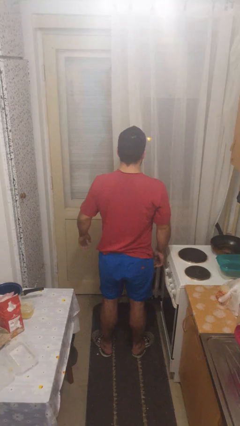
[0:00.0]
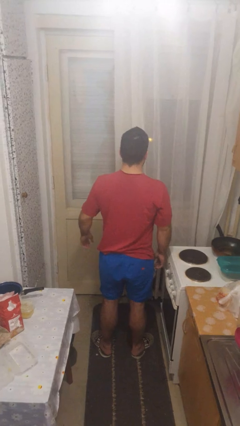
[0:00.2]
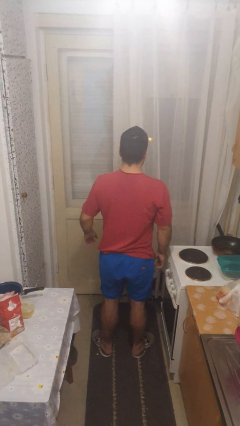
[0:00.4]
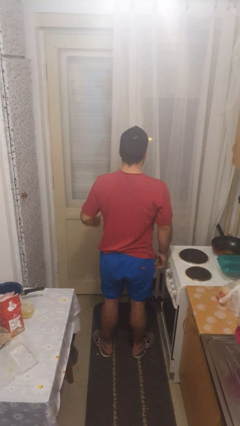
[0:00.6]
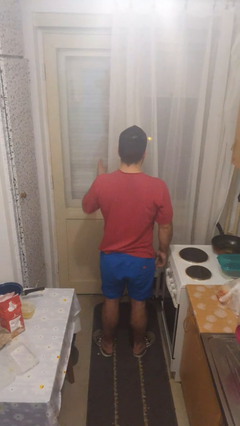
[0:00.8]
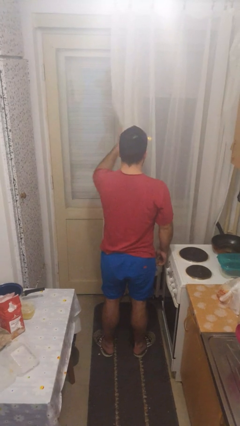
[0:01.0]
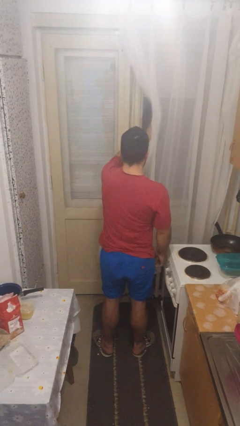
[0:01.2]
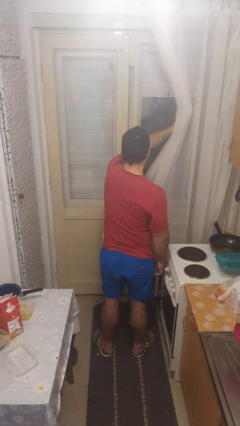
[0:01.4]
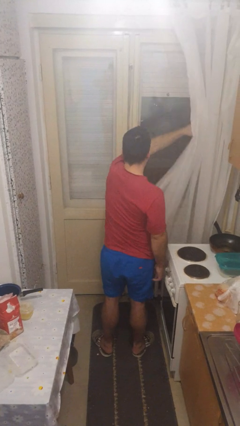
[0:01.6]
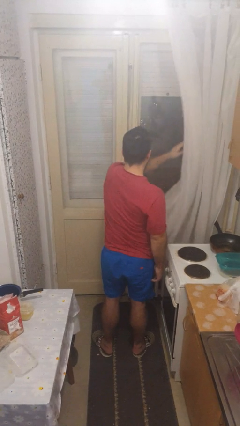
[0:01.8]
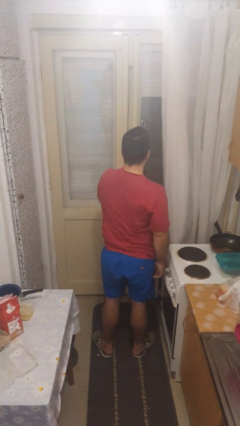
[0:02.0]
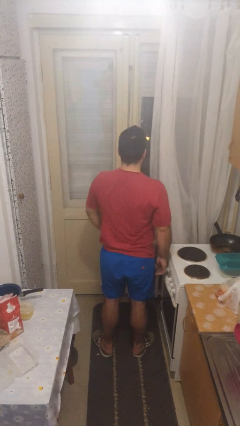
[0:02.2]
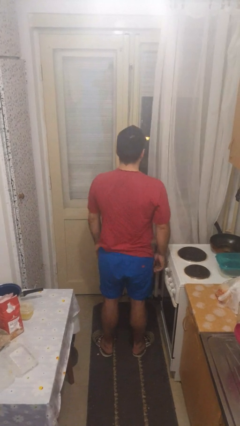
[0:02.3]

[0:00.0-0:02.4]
person opens curtains

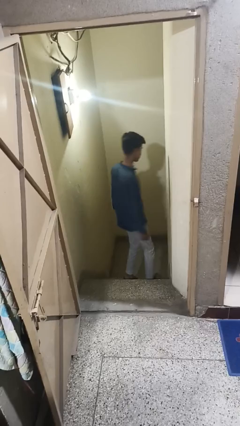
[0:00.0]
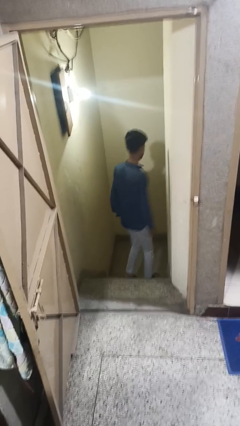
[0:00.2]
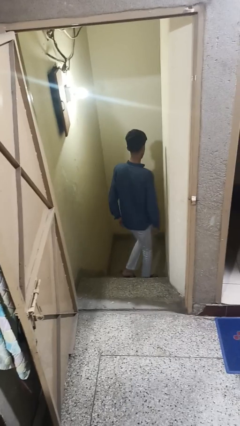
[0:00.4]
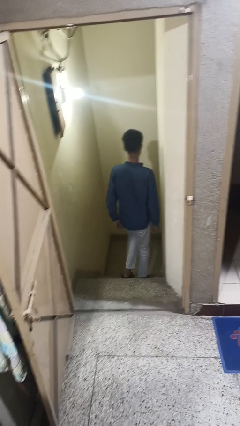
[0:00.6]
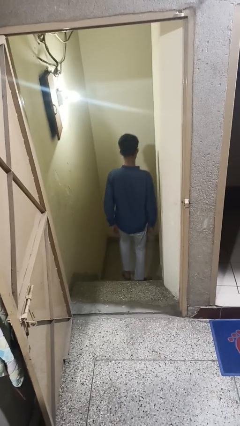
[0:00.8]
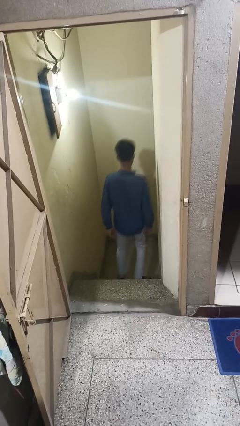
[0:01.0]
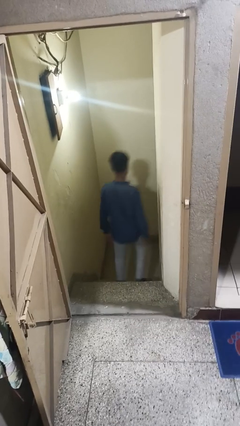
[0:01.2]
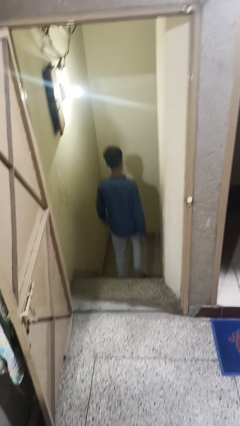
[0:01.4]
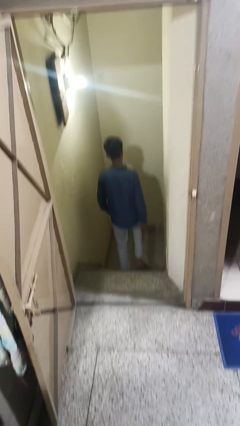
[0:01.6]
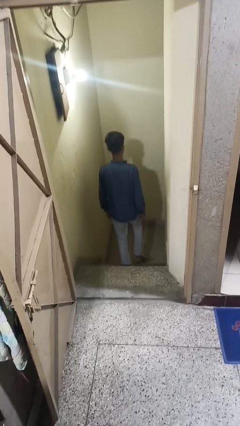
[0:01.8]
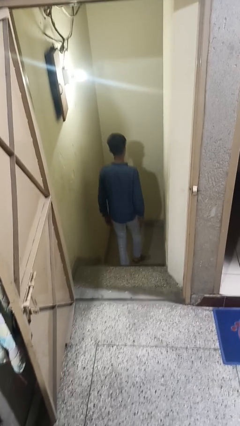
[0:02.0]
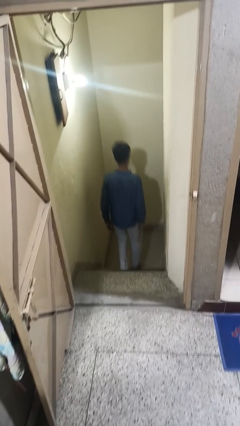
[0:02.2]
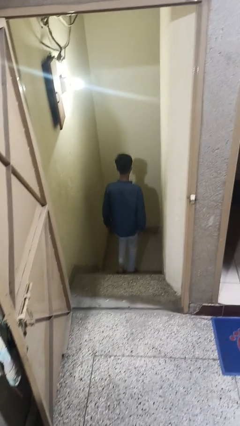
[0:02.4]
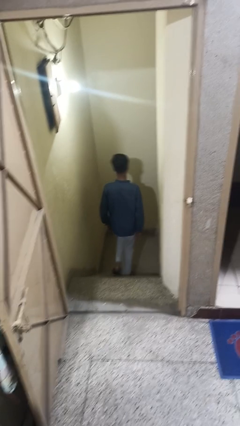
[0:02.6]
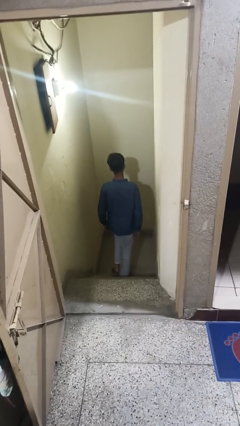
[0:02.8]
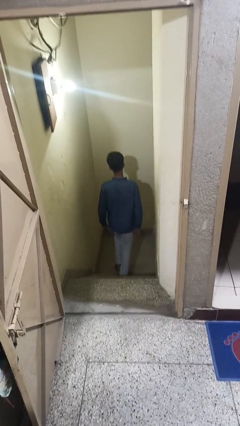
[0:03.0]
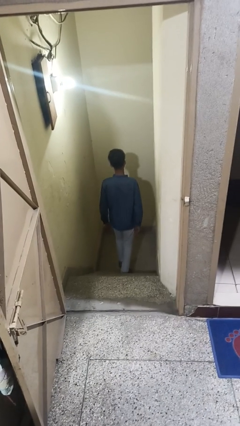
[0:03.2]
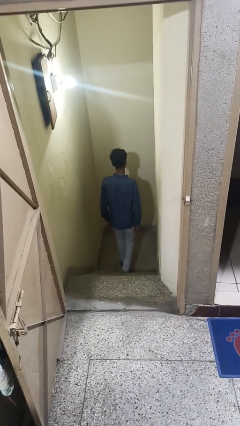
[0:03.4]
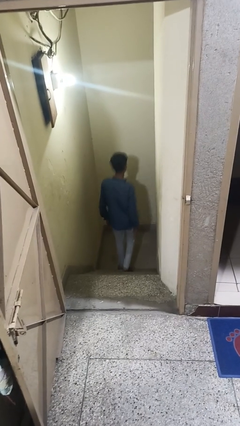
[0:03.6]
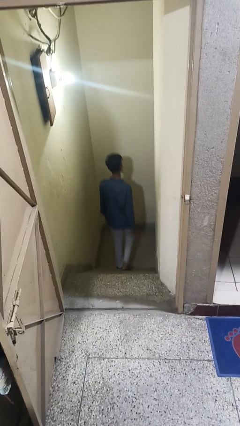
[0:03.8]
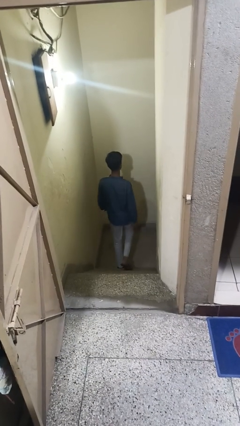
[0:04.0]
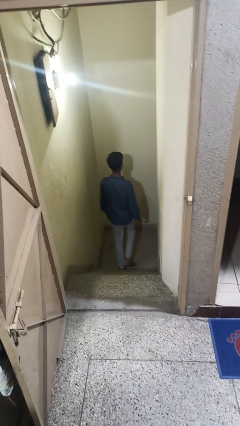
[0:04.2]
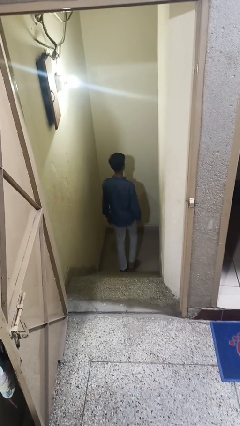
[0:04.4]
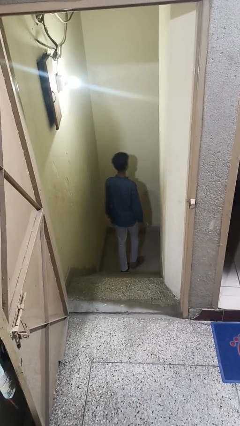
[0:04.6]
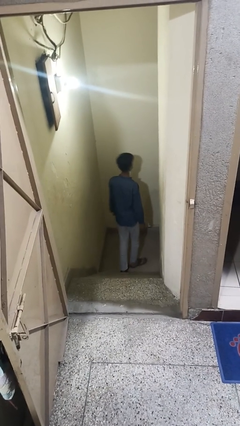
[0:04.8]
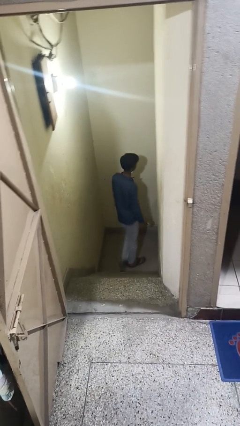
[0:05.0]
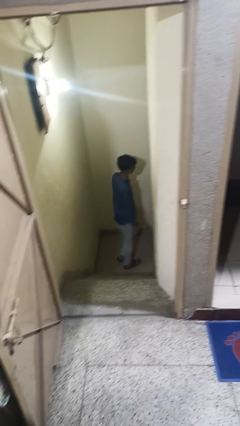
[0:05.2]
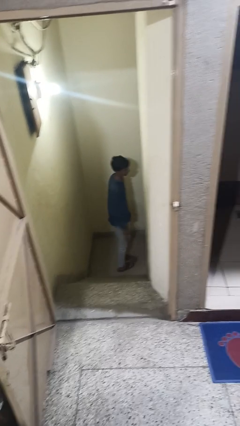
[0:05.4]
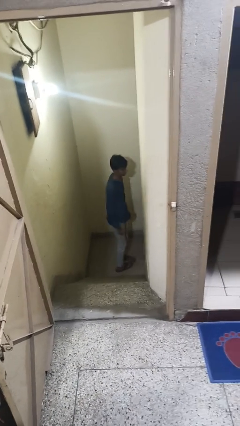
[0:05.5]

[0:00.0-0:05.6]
person climbs down stairs

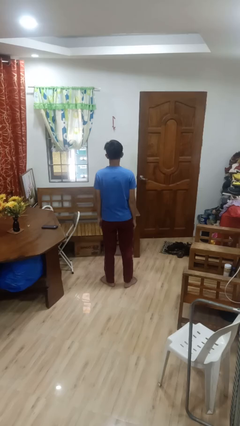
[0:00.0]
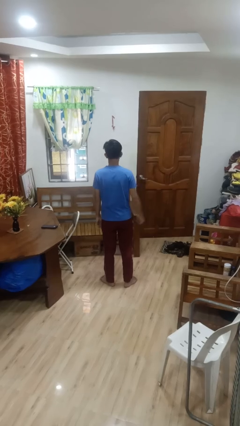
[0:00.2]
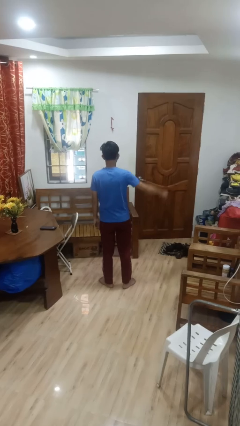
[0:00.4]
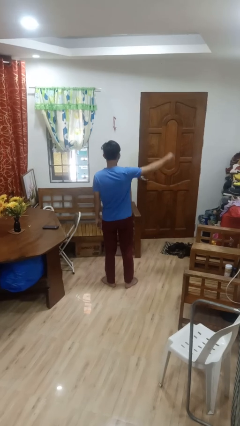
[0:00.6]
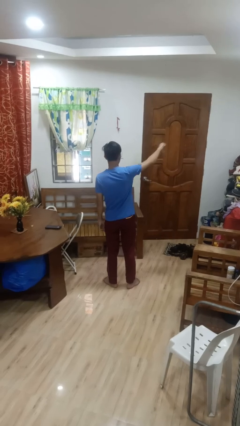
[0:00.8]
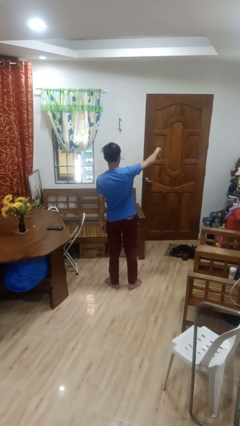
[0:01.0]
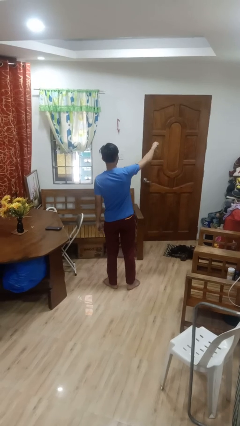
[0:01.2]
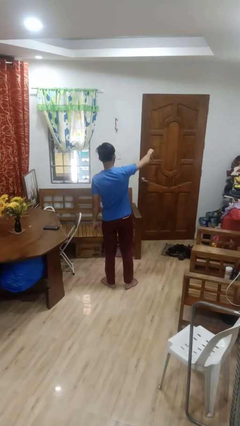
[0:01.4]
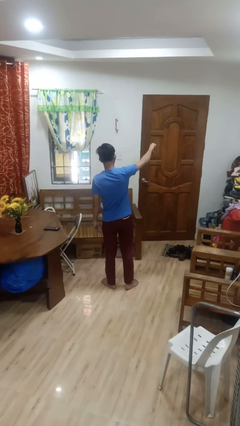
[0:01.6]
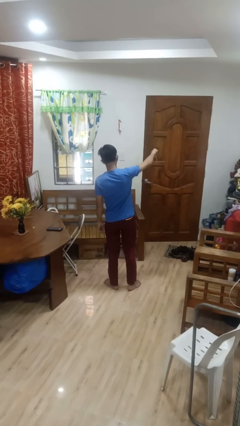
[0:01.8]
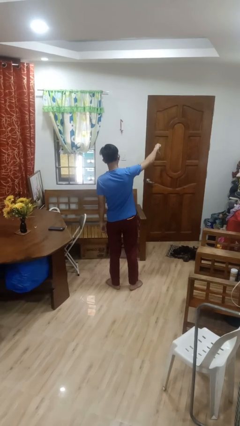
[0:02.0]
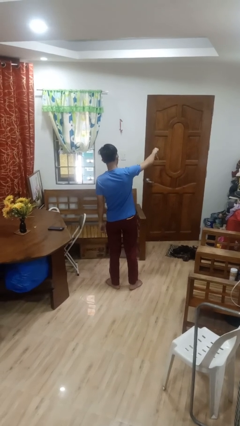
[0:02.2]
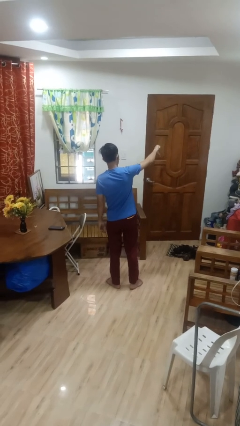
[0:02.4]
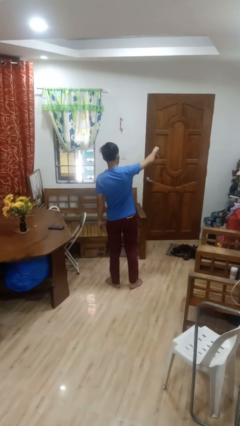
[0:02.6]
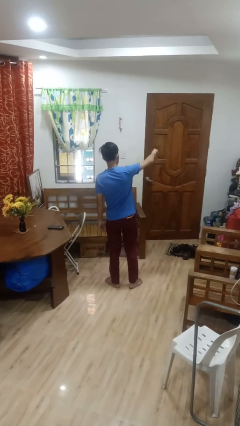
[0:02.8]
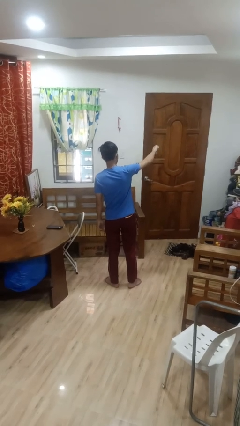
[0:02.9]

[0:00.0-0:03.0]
person gestures thumbs down

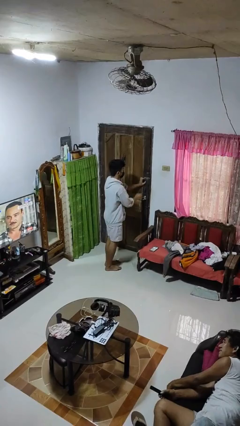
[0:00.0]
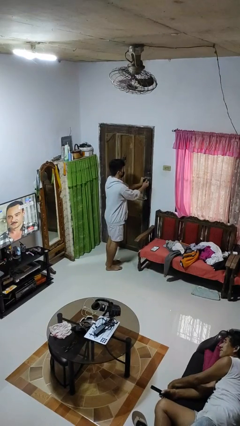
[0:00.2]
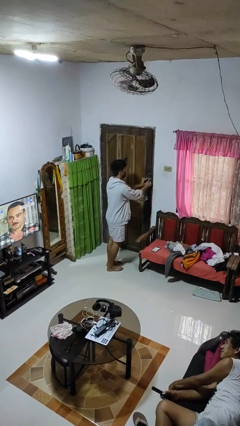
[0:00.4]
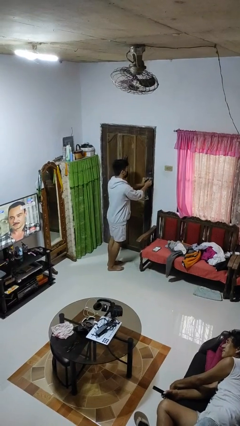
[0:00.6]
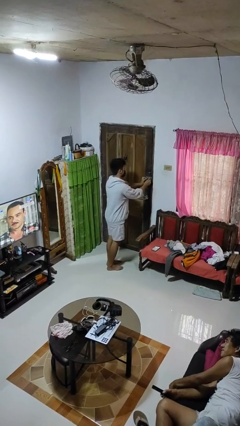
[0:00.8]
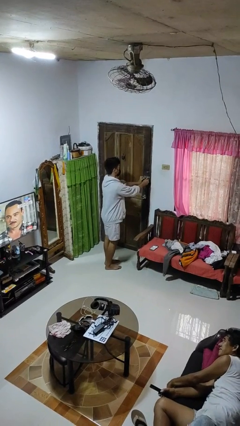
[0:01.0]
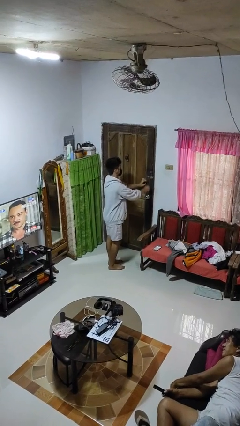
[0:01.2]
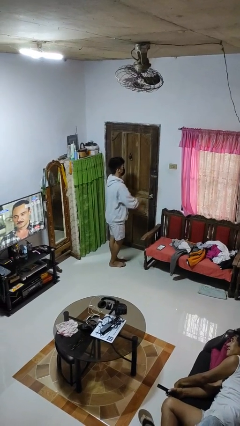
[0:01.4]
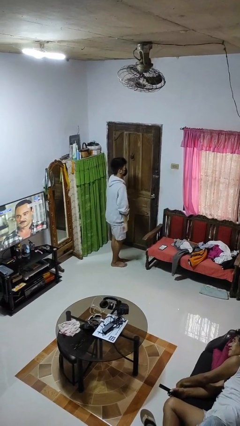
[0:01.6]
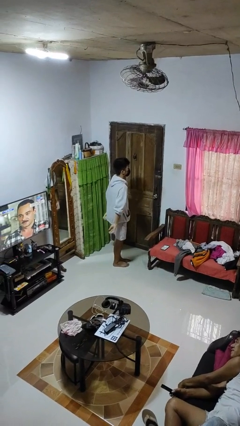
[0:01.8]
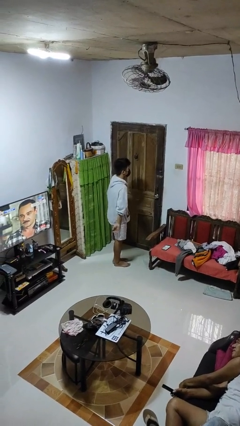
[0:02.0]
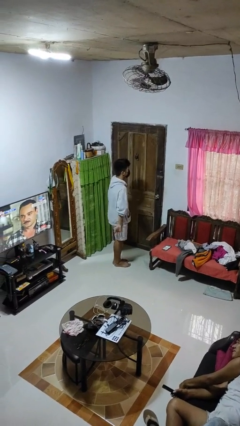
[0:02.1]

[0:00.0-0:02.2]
person locks door with keys

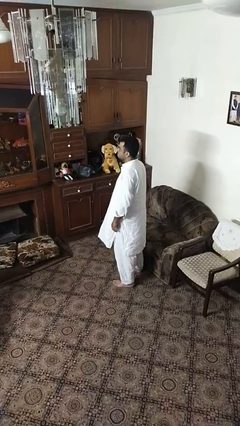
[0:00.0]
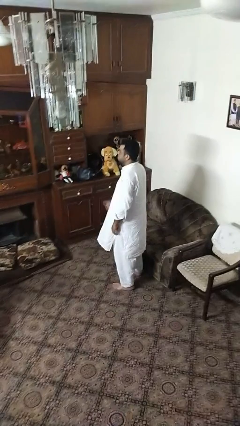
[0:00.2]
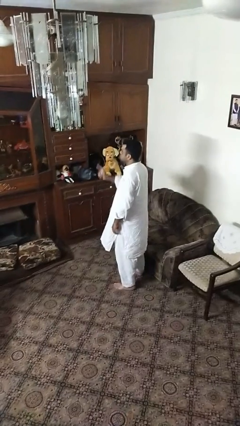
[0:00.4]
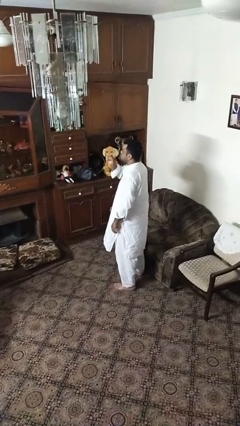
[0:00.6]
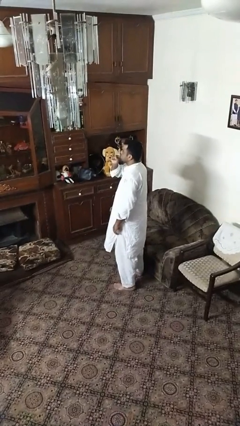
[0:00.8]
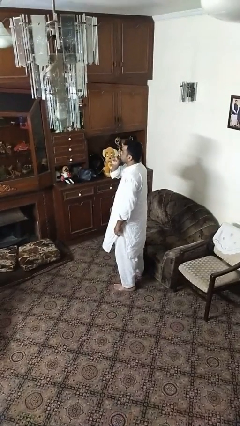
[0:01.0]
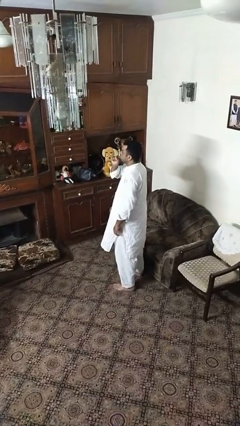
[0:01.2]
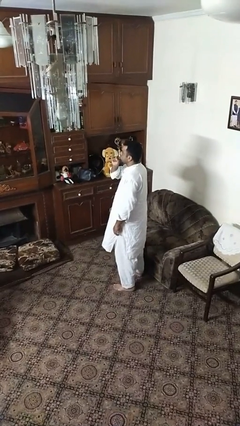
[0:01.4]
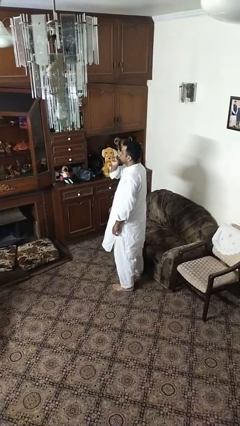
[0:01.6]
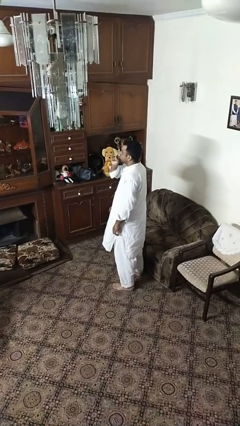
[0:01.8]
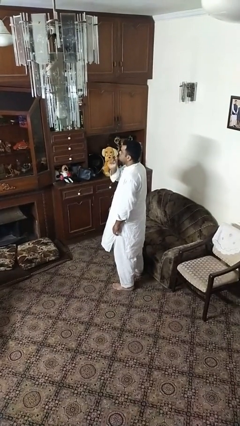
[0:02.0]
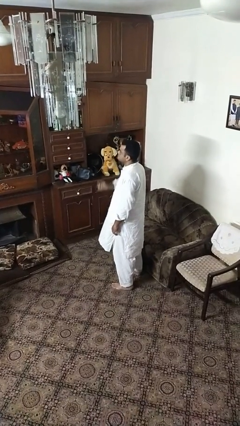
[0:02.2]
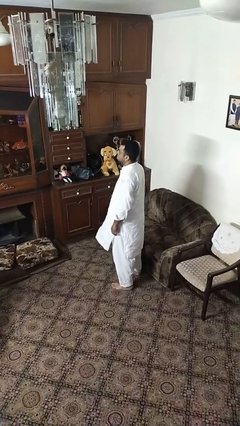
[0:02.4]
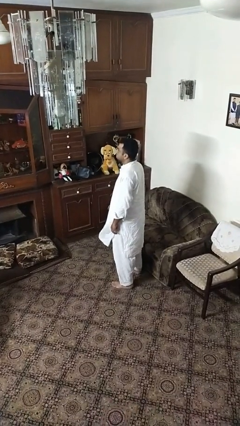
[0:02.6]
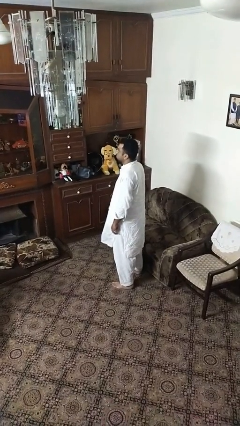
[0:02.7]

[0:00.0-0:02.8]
person gestures be quiet

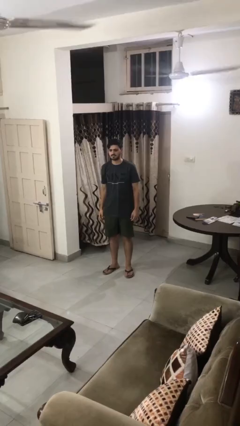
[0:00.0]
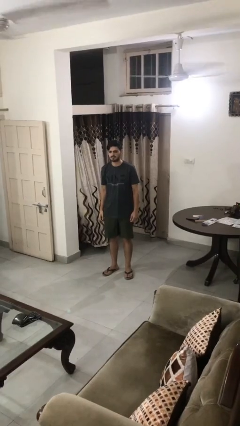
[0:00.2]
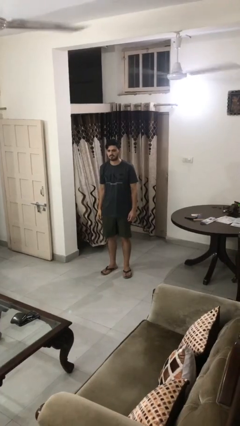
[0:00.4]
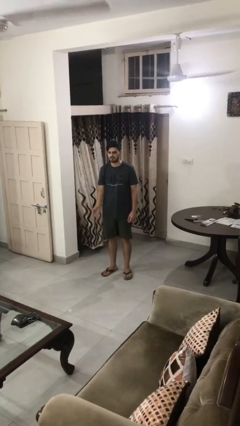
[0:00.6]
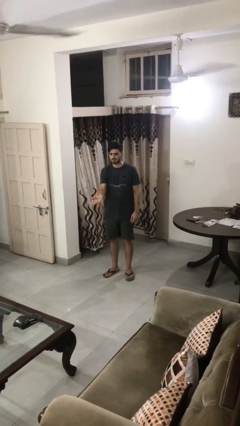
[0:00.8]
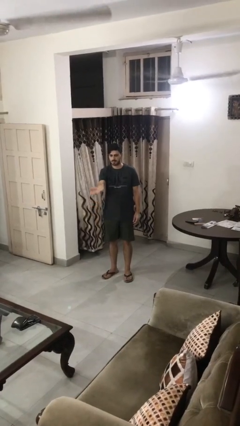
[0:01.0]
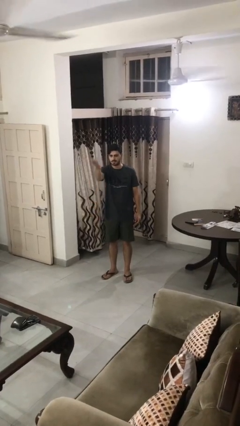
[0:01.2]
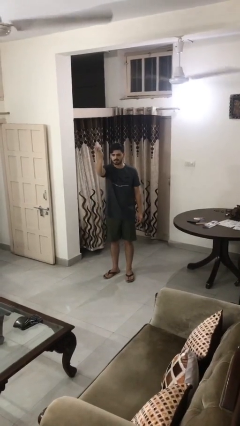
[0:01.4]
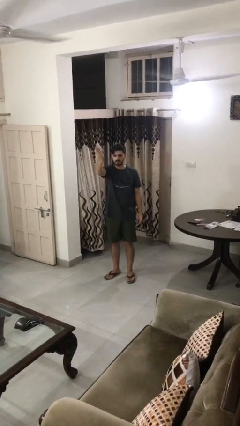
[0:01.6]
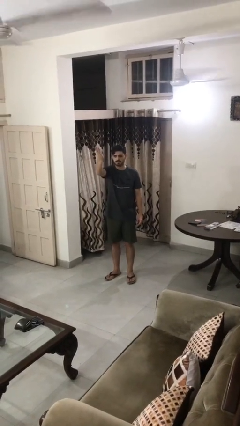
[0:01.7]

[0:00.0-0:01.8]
person gestures swipe up
